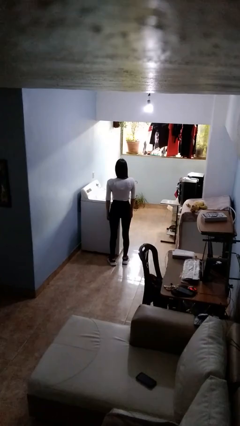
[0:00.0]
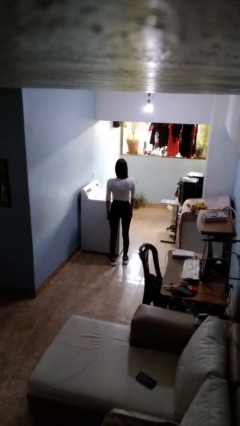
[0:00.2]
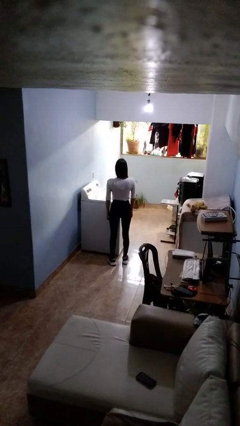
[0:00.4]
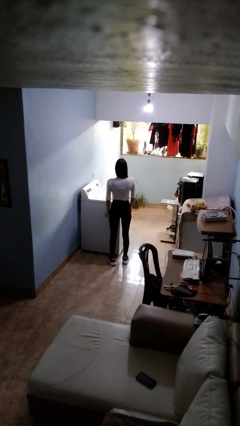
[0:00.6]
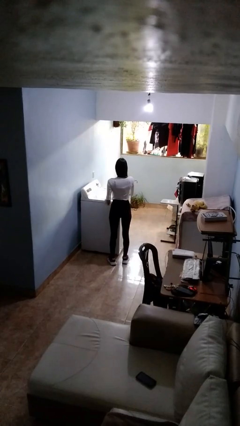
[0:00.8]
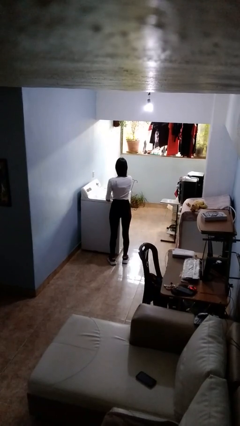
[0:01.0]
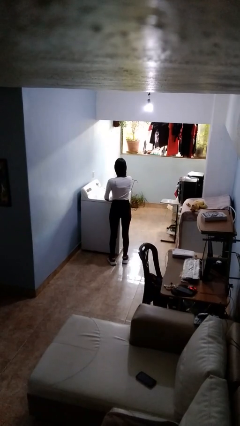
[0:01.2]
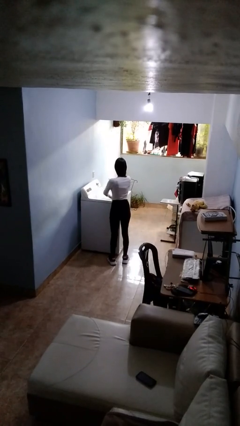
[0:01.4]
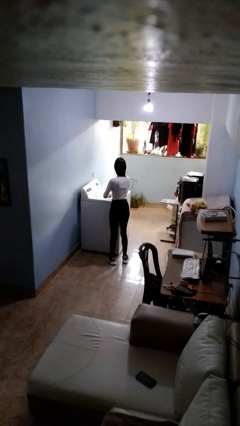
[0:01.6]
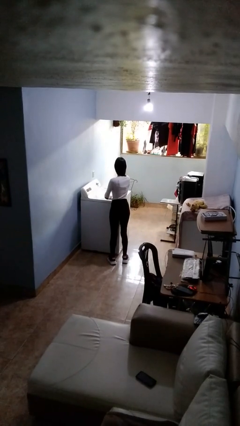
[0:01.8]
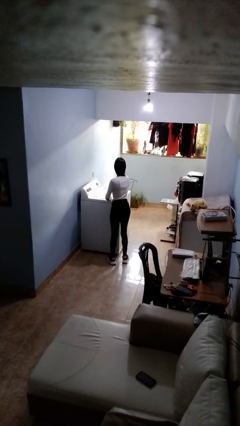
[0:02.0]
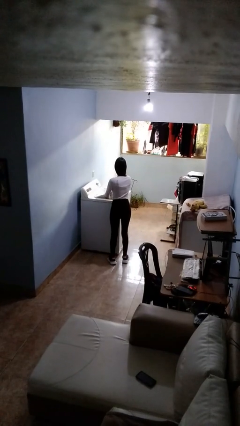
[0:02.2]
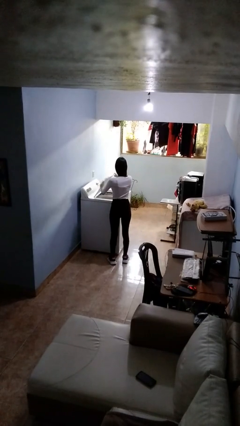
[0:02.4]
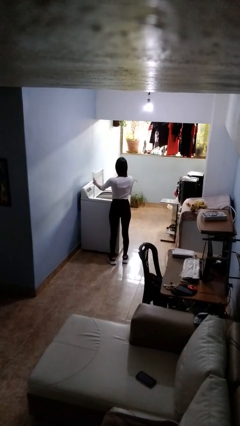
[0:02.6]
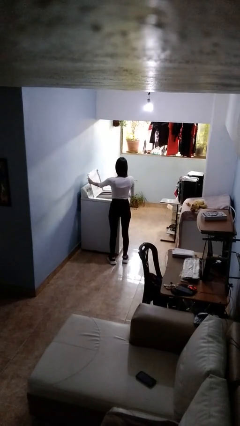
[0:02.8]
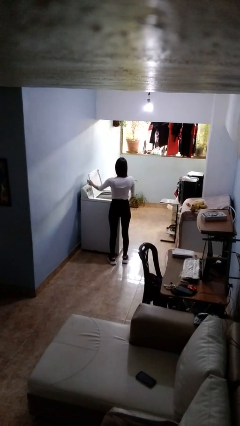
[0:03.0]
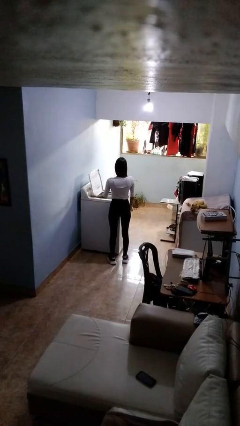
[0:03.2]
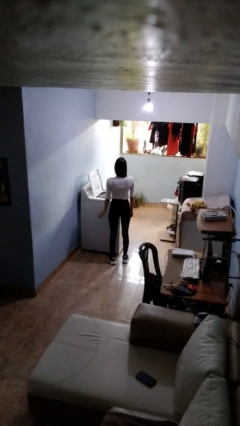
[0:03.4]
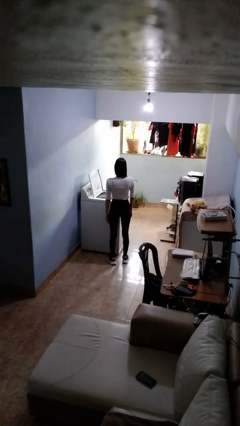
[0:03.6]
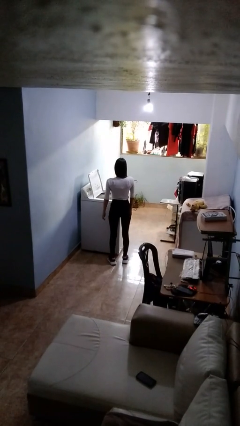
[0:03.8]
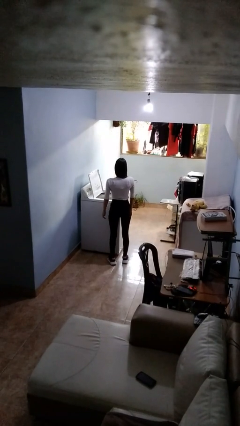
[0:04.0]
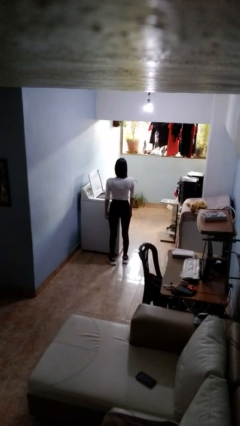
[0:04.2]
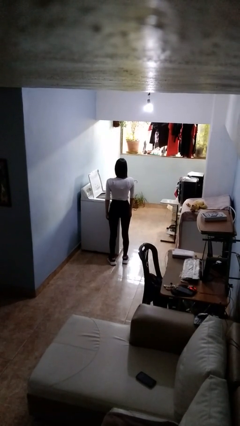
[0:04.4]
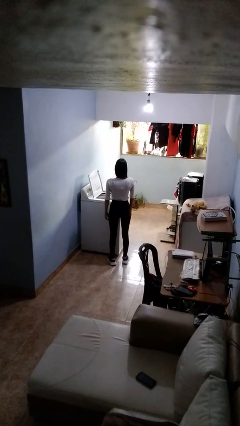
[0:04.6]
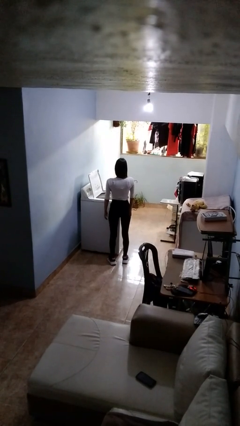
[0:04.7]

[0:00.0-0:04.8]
person opens clothes washer

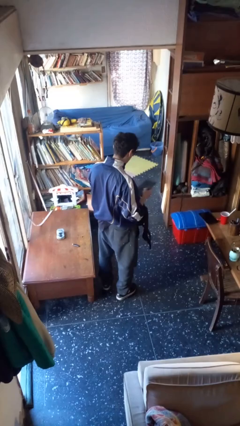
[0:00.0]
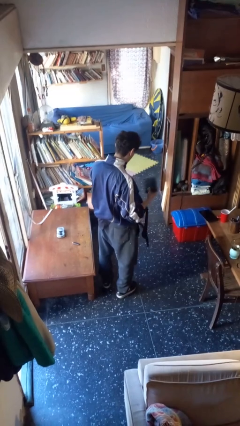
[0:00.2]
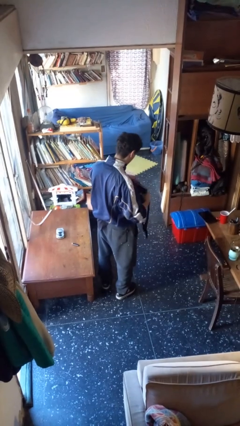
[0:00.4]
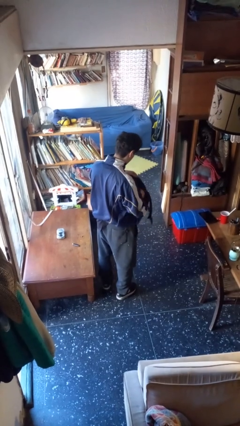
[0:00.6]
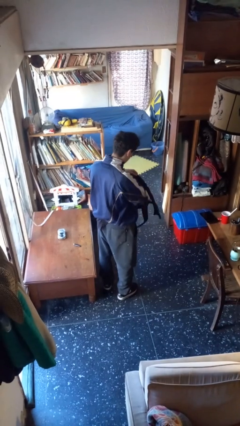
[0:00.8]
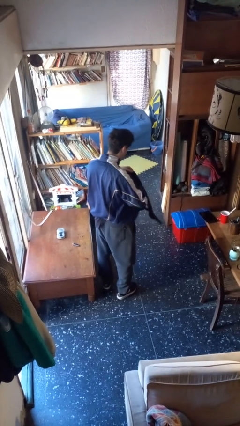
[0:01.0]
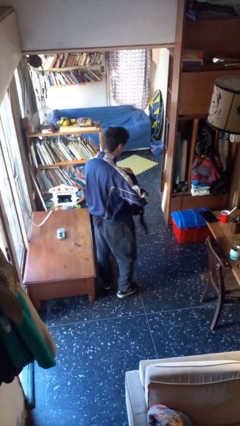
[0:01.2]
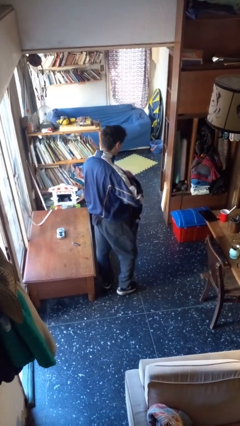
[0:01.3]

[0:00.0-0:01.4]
person puts object into backpack

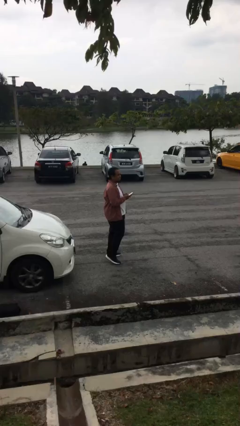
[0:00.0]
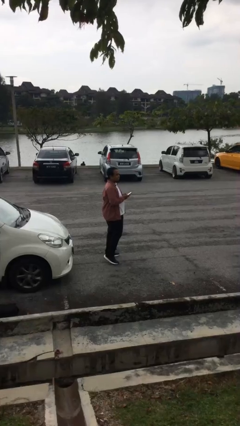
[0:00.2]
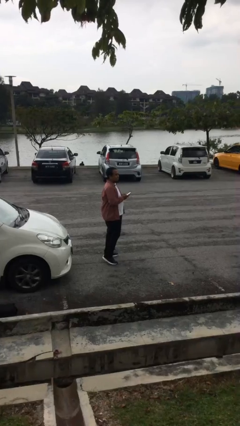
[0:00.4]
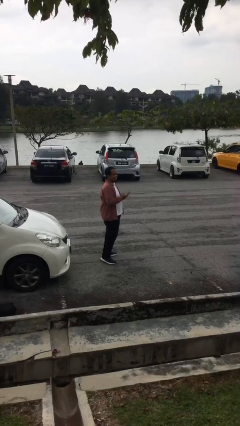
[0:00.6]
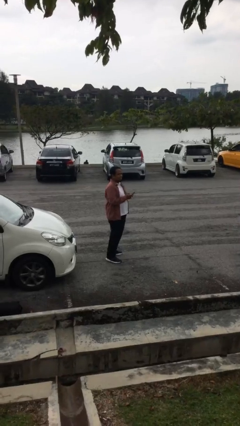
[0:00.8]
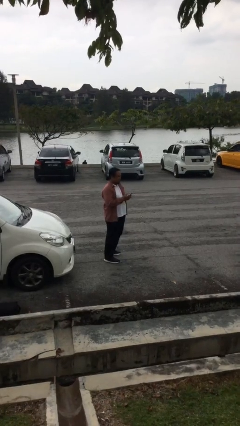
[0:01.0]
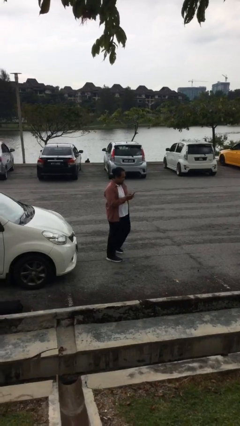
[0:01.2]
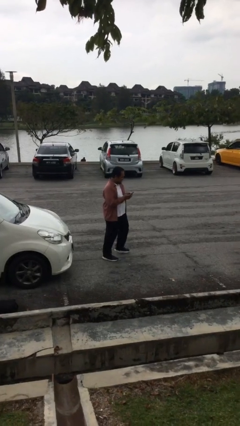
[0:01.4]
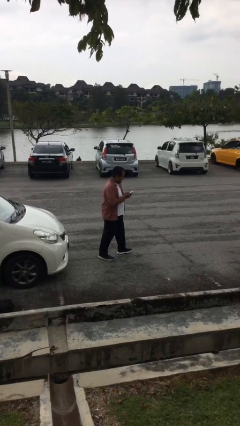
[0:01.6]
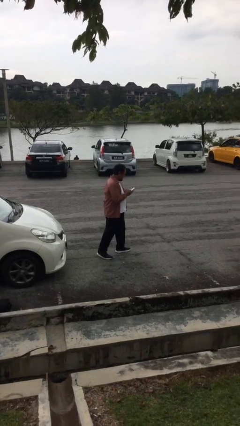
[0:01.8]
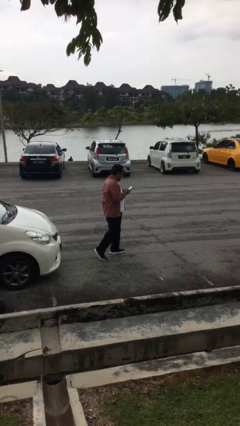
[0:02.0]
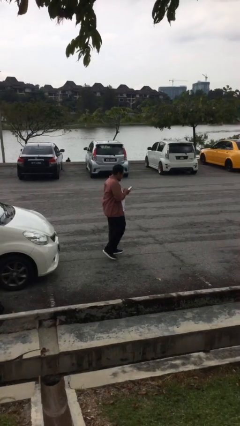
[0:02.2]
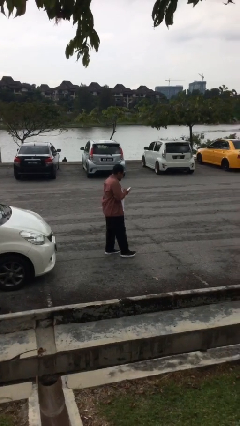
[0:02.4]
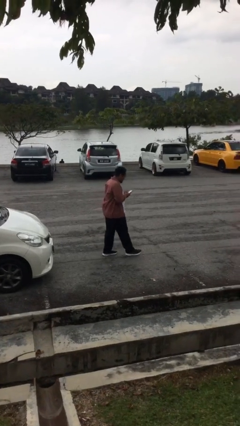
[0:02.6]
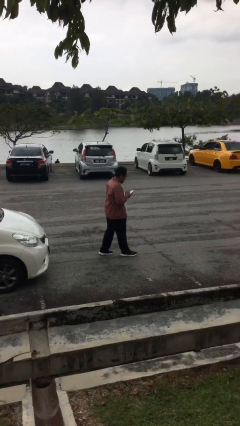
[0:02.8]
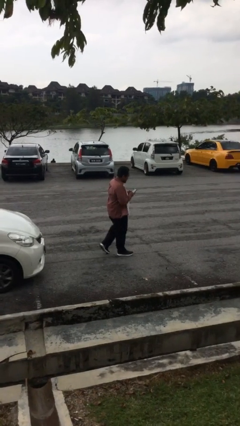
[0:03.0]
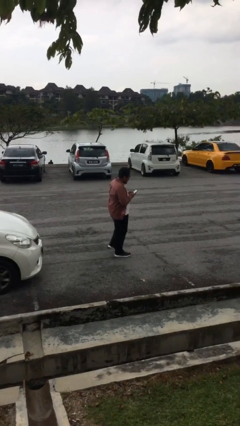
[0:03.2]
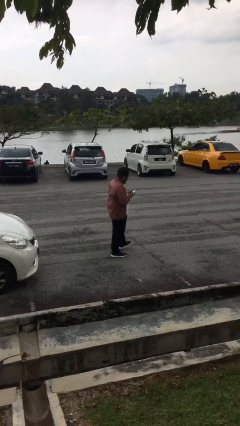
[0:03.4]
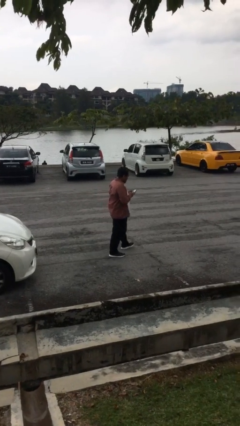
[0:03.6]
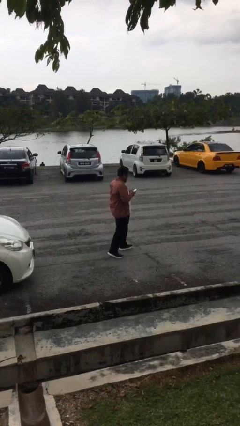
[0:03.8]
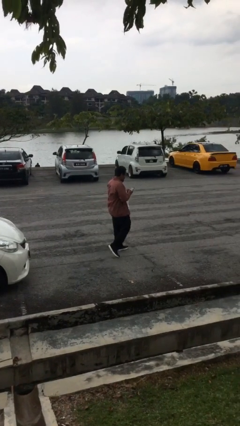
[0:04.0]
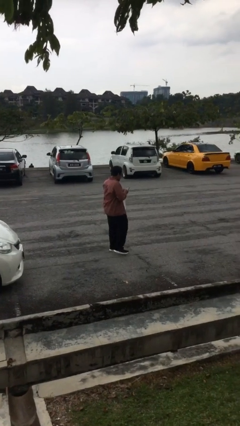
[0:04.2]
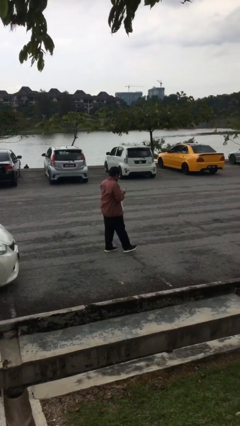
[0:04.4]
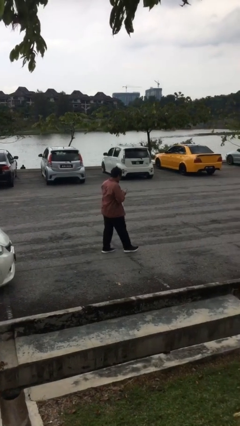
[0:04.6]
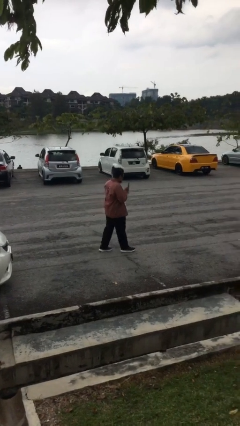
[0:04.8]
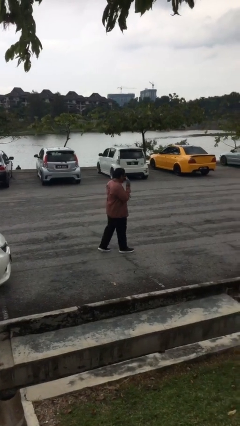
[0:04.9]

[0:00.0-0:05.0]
person texts on phone

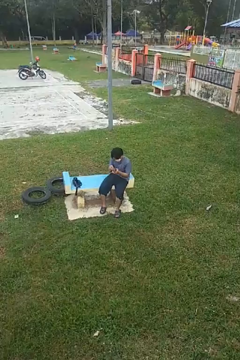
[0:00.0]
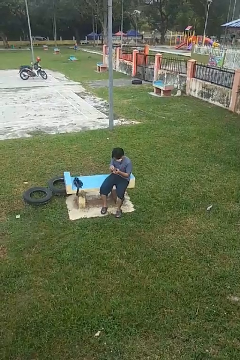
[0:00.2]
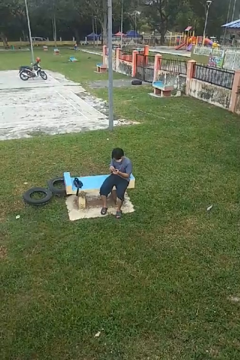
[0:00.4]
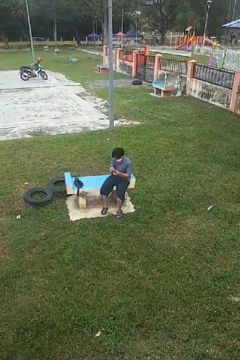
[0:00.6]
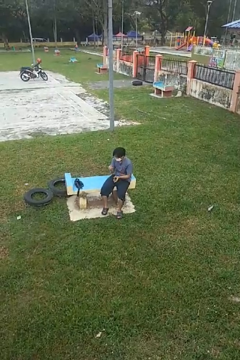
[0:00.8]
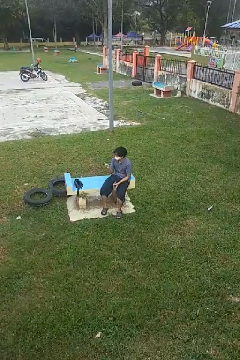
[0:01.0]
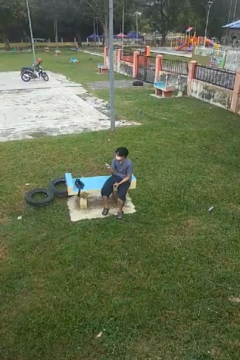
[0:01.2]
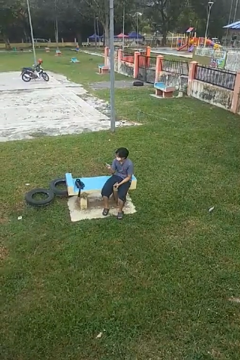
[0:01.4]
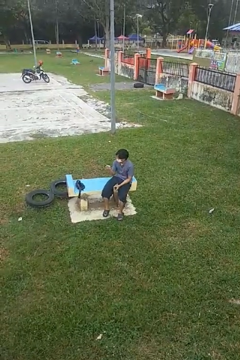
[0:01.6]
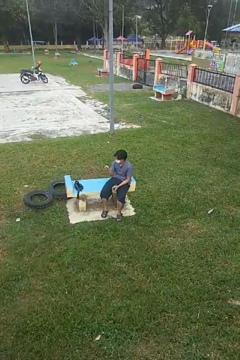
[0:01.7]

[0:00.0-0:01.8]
person takes object from purse

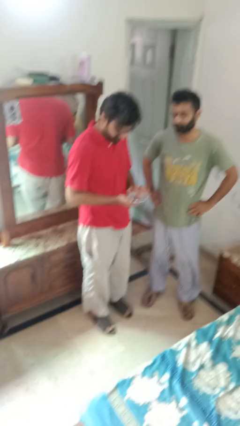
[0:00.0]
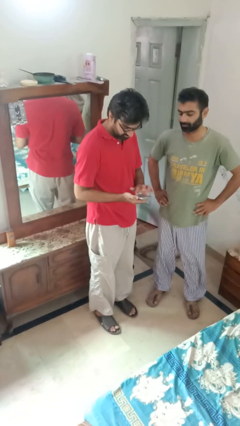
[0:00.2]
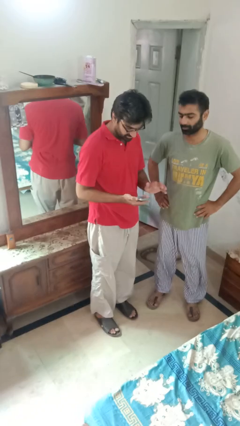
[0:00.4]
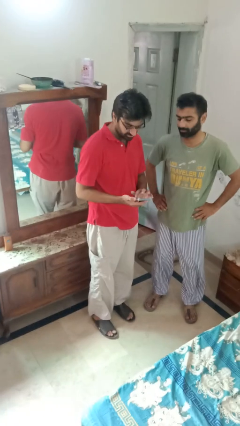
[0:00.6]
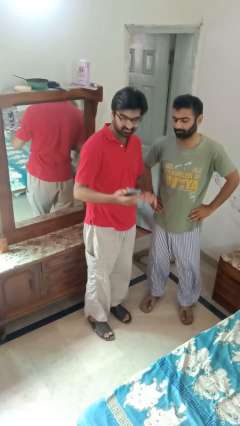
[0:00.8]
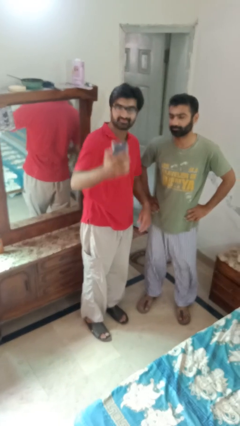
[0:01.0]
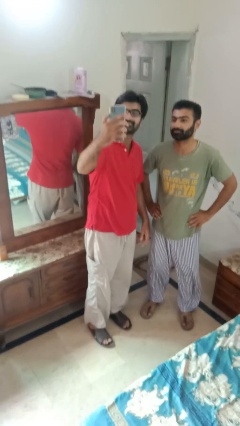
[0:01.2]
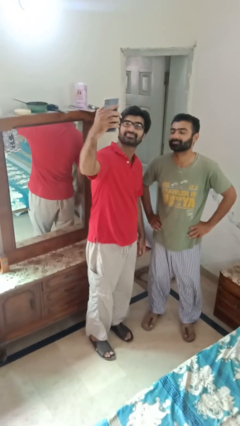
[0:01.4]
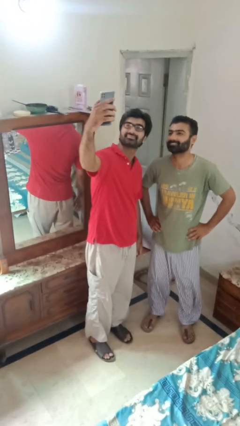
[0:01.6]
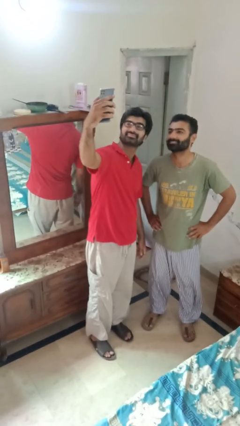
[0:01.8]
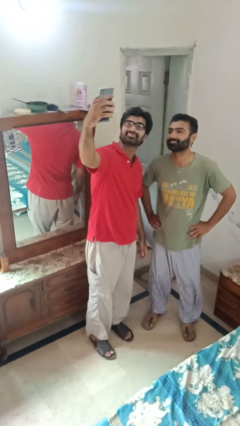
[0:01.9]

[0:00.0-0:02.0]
person takes selfie with person

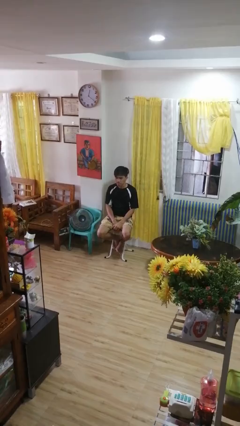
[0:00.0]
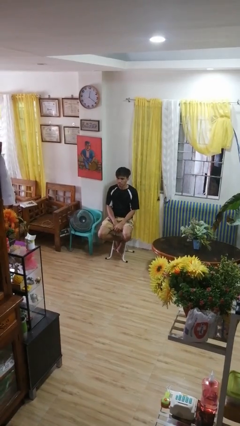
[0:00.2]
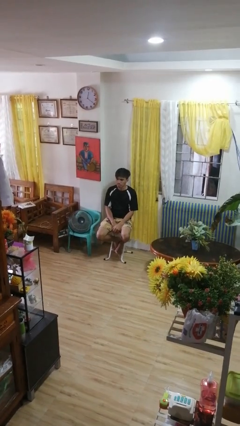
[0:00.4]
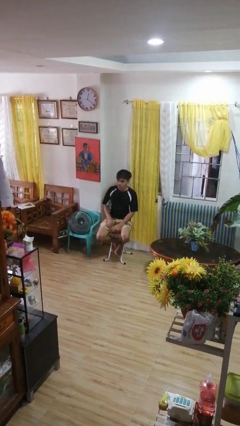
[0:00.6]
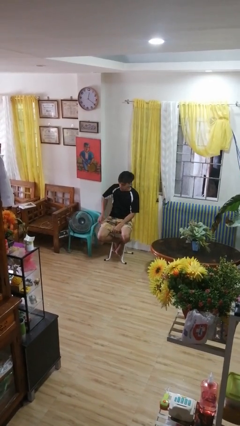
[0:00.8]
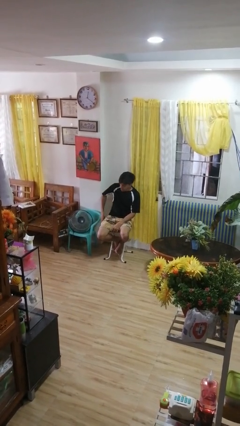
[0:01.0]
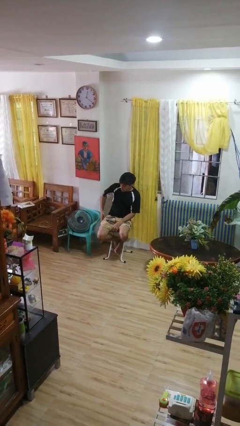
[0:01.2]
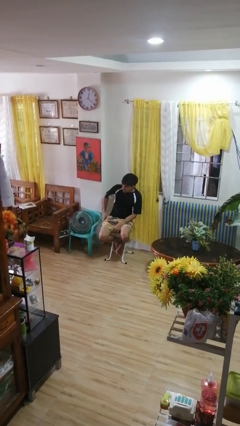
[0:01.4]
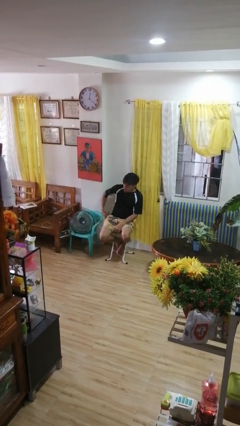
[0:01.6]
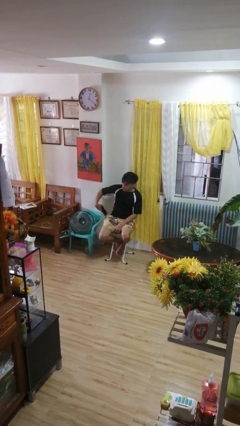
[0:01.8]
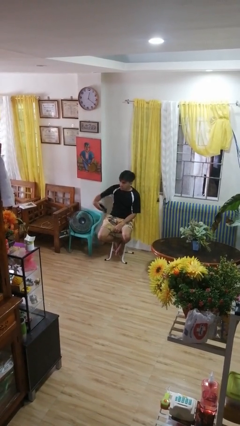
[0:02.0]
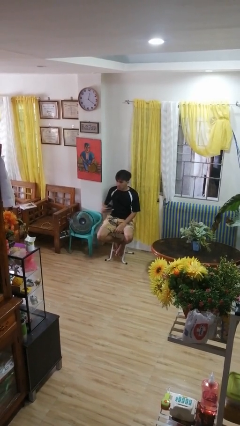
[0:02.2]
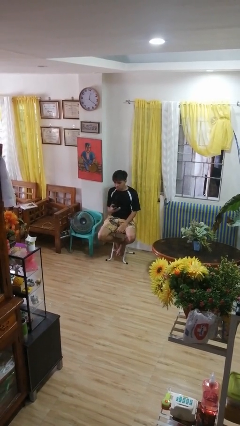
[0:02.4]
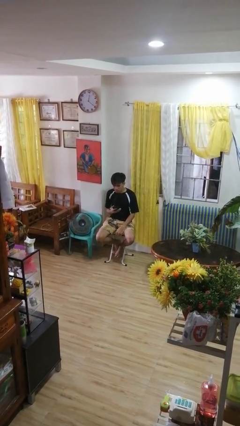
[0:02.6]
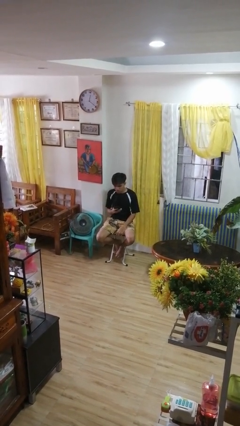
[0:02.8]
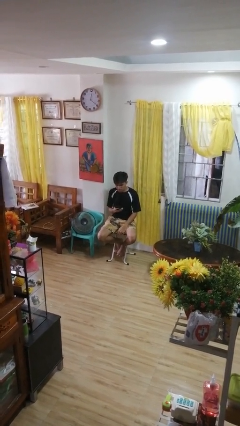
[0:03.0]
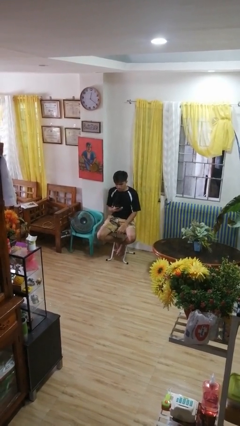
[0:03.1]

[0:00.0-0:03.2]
person takes phone from pocket
